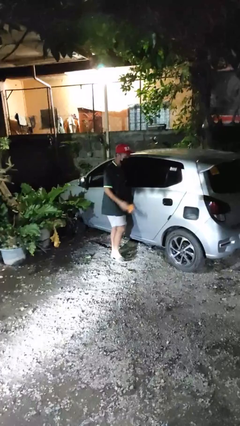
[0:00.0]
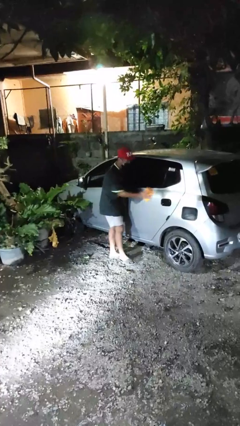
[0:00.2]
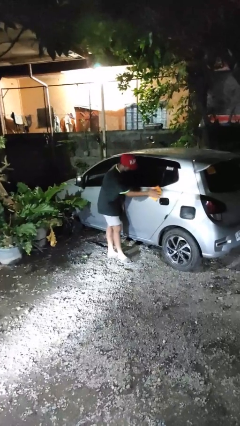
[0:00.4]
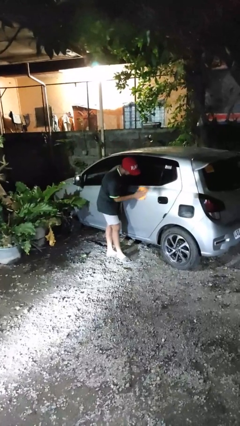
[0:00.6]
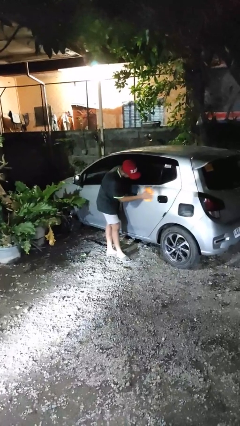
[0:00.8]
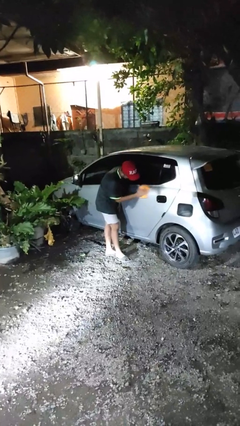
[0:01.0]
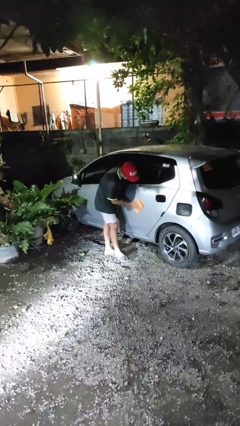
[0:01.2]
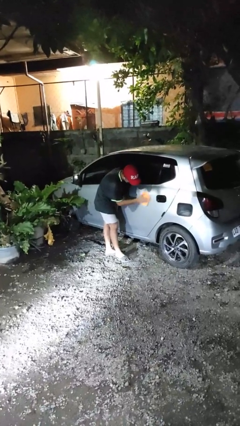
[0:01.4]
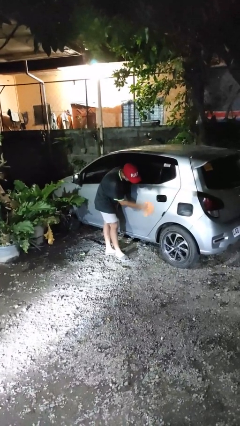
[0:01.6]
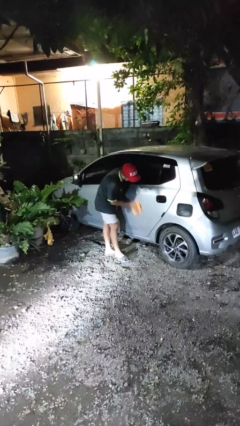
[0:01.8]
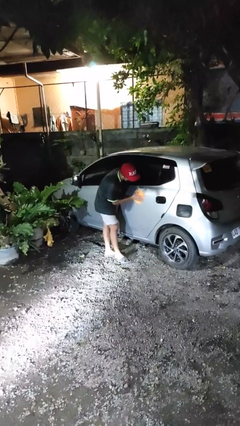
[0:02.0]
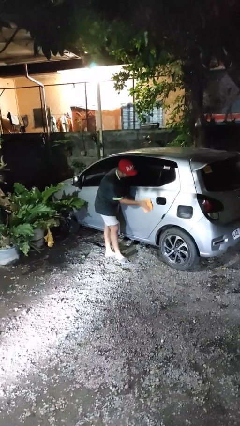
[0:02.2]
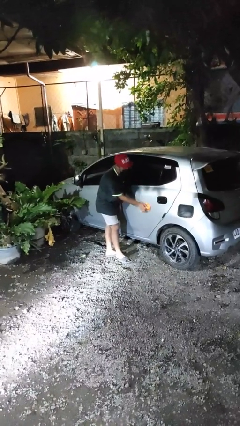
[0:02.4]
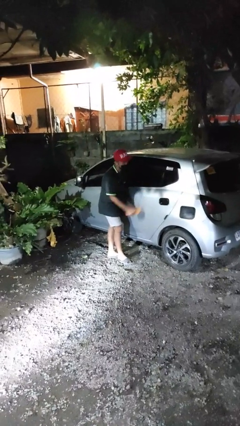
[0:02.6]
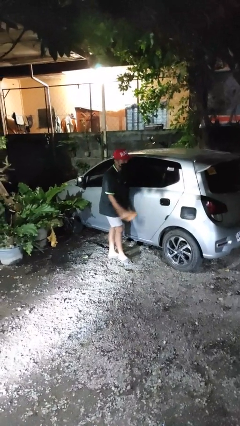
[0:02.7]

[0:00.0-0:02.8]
person polishes car with rag

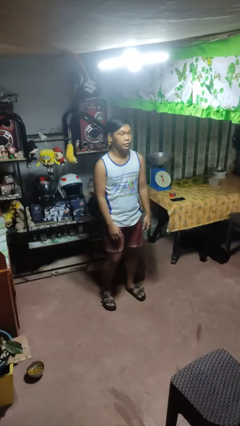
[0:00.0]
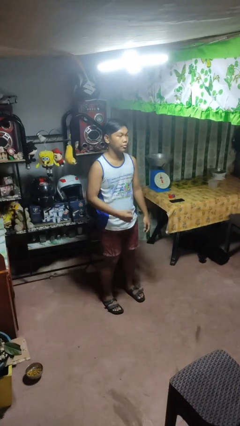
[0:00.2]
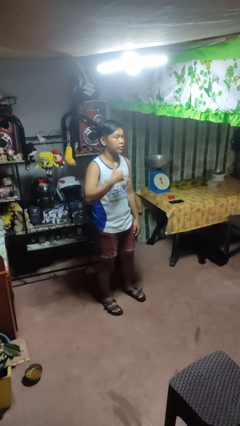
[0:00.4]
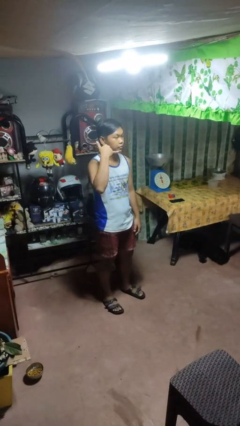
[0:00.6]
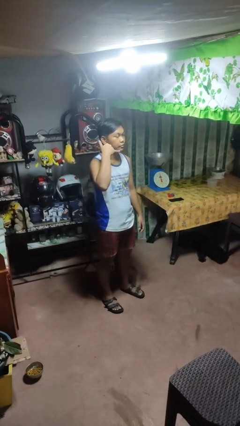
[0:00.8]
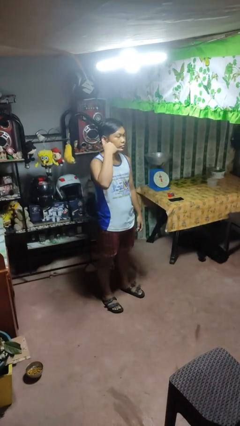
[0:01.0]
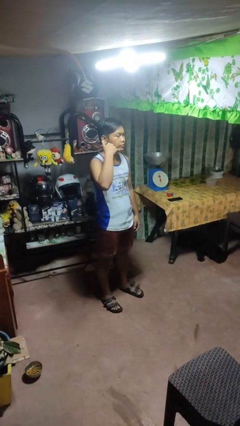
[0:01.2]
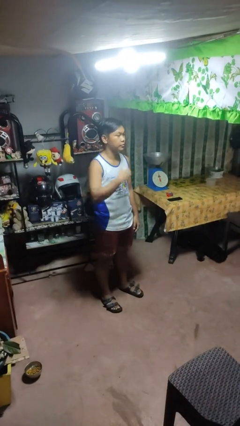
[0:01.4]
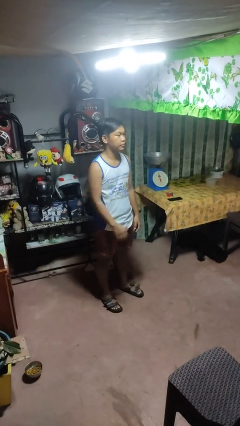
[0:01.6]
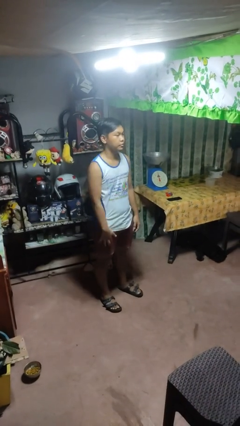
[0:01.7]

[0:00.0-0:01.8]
person gestures call me

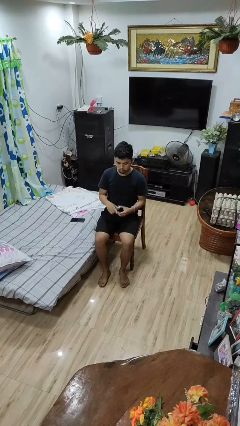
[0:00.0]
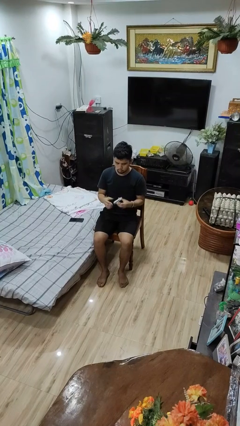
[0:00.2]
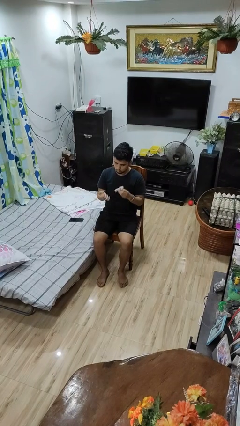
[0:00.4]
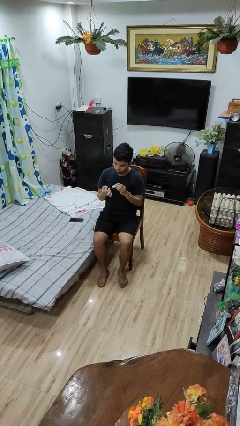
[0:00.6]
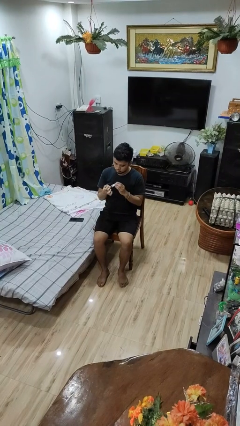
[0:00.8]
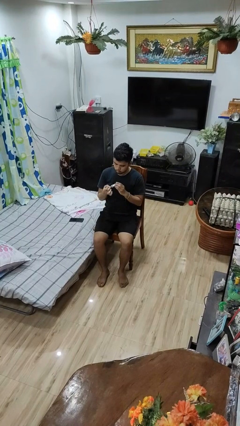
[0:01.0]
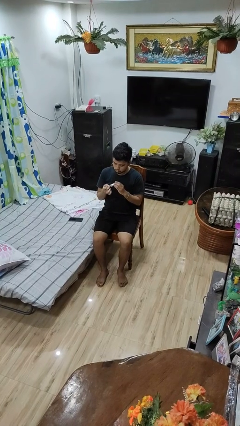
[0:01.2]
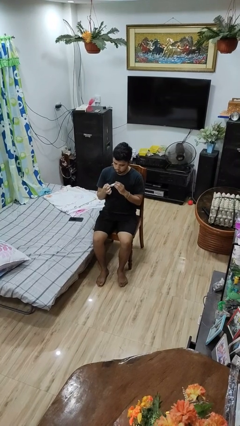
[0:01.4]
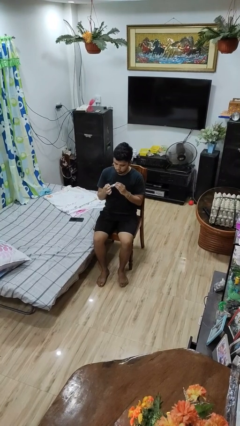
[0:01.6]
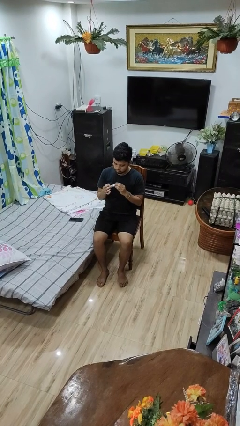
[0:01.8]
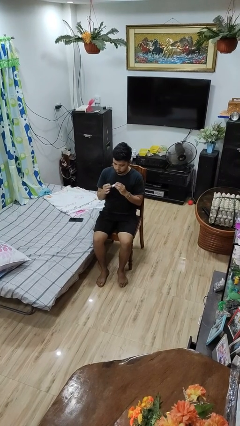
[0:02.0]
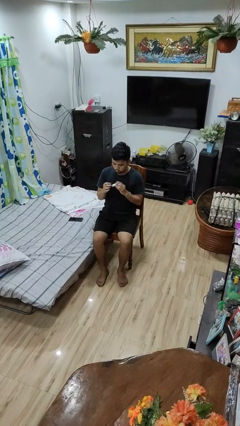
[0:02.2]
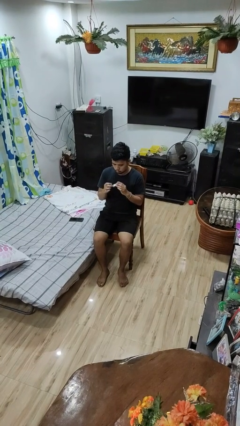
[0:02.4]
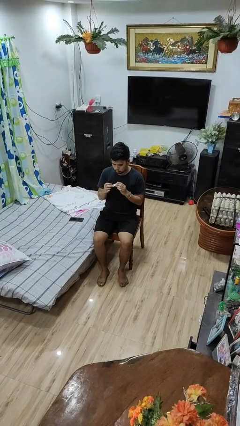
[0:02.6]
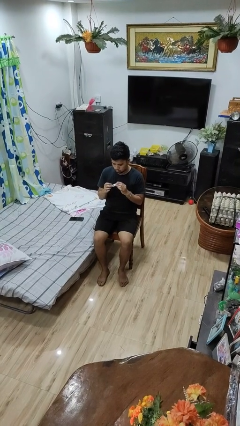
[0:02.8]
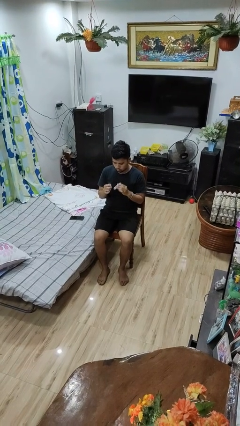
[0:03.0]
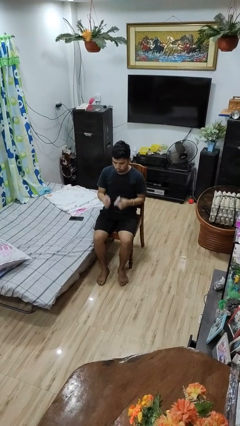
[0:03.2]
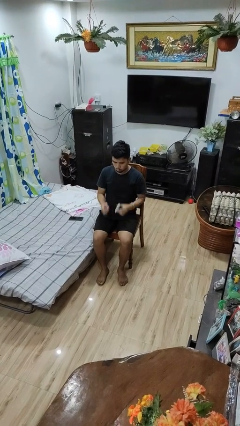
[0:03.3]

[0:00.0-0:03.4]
person clips fingernails

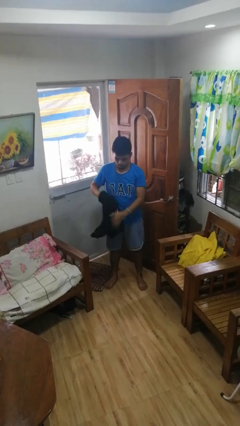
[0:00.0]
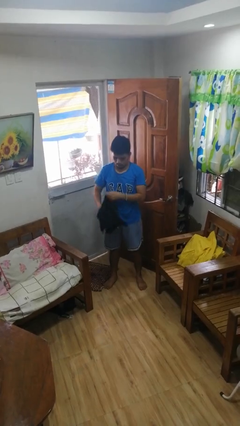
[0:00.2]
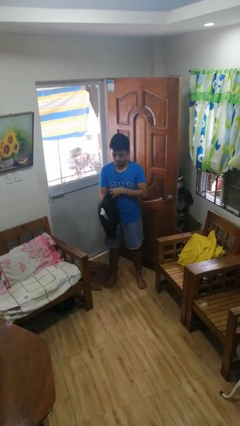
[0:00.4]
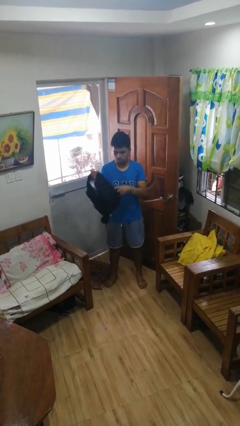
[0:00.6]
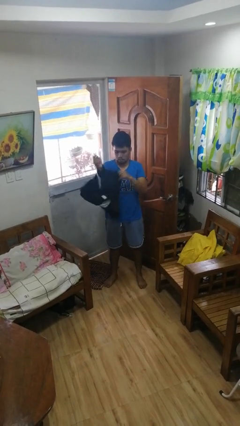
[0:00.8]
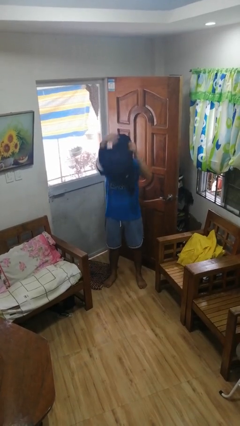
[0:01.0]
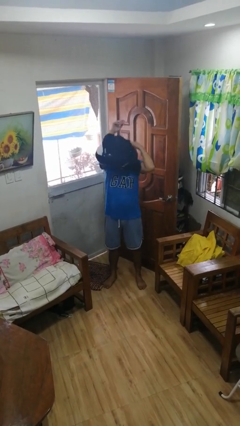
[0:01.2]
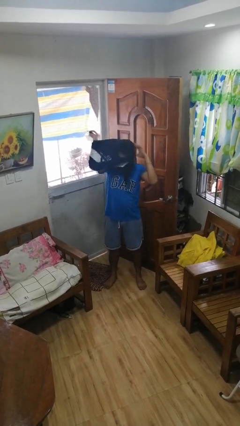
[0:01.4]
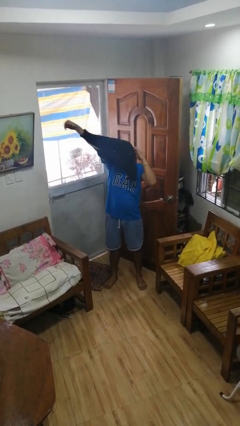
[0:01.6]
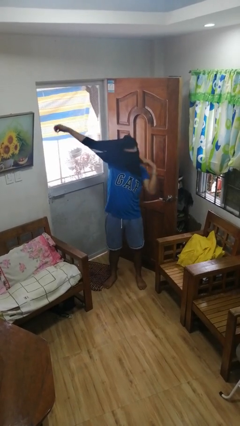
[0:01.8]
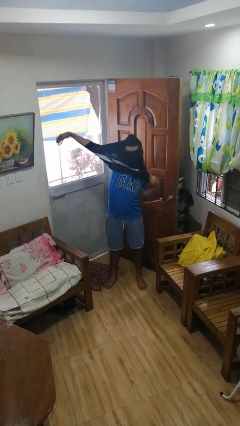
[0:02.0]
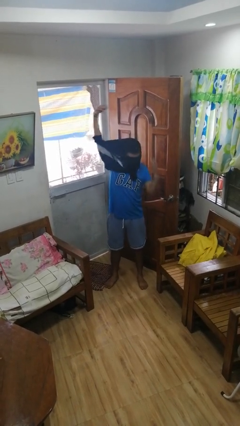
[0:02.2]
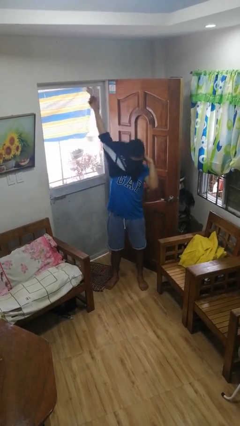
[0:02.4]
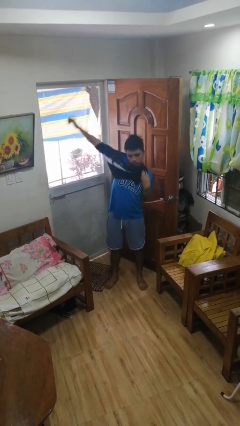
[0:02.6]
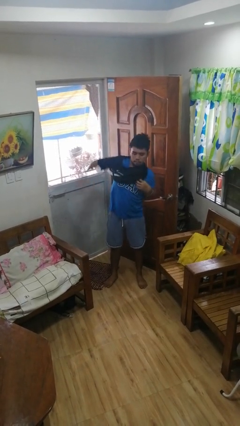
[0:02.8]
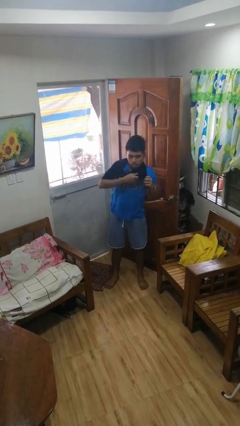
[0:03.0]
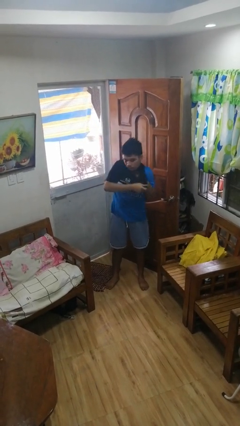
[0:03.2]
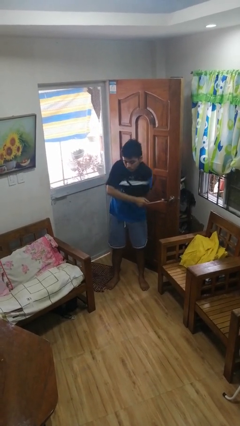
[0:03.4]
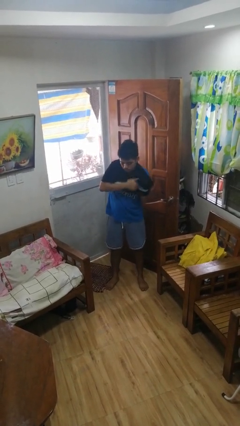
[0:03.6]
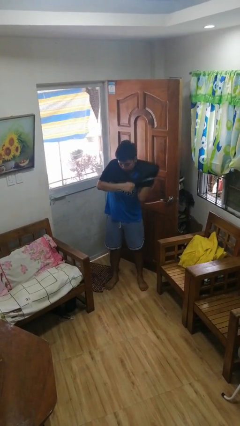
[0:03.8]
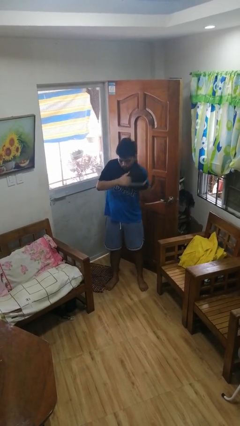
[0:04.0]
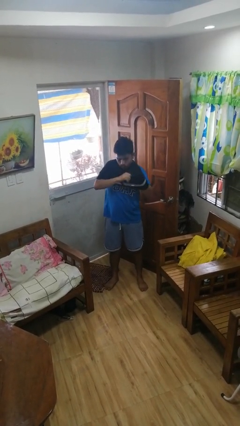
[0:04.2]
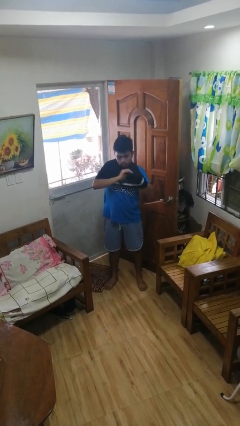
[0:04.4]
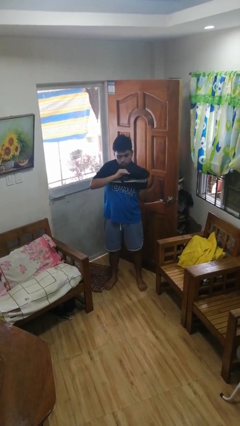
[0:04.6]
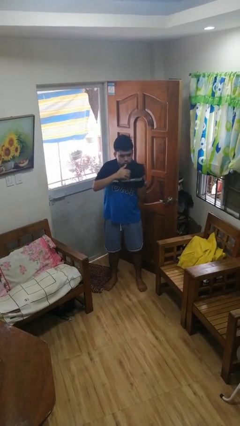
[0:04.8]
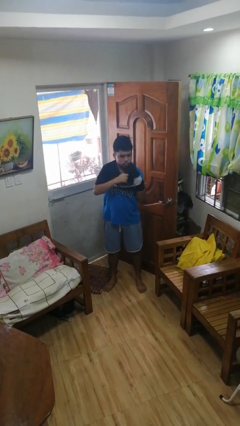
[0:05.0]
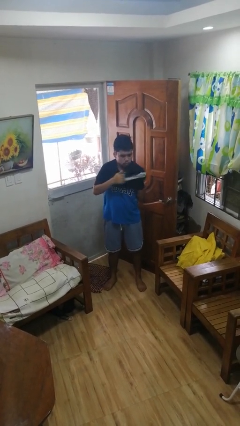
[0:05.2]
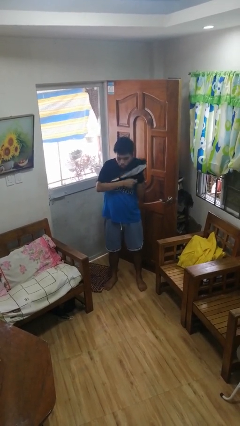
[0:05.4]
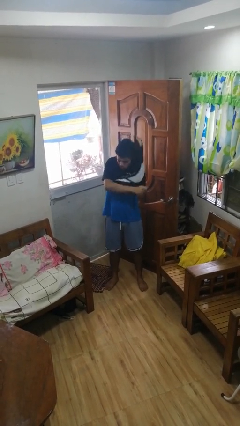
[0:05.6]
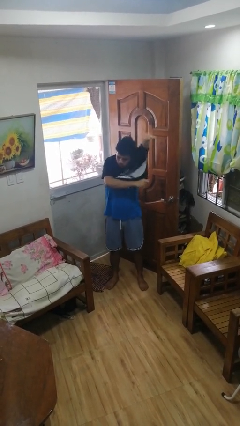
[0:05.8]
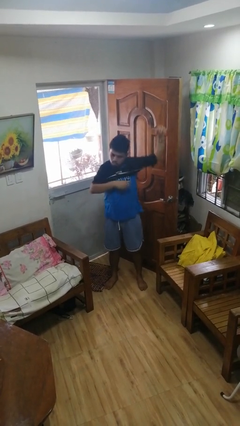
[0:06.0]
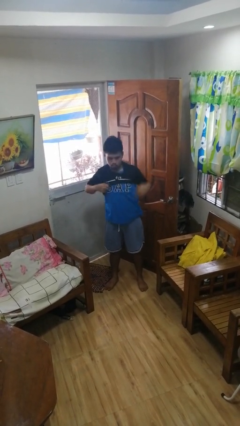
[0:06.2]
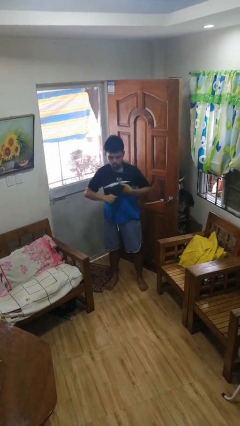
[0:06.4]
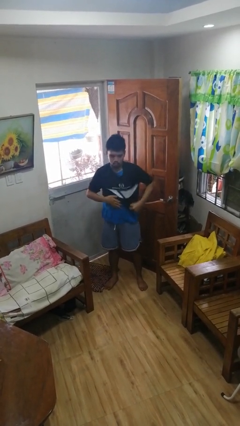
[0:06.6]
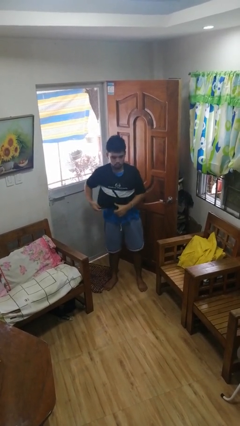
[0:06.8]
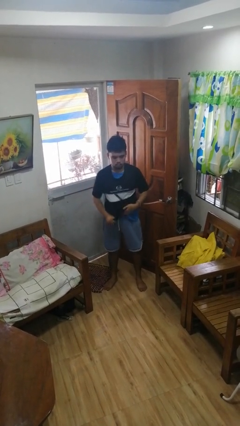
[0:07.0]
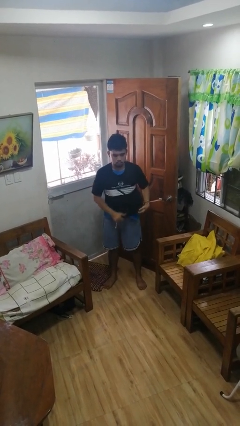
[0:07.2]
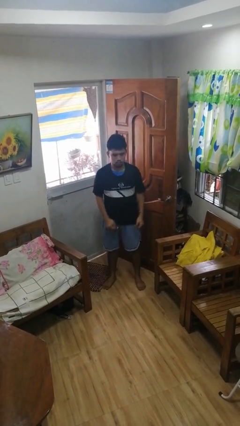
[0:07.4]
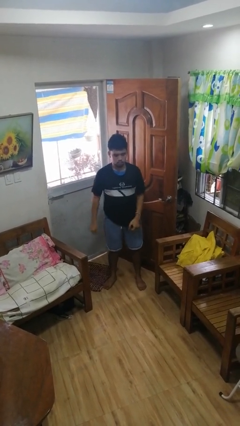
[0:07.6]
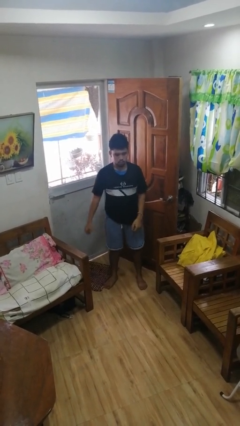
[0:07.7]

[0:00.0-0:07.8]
person puts on shirt

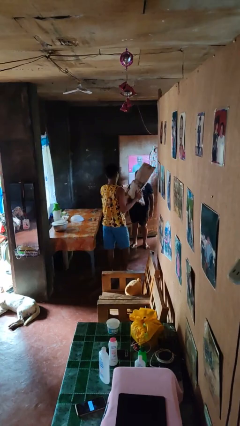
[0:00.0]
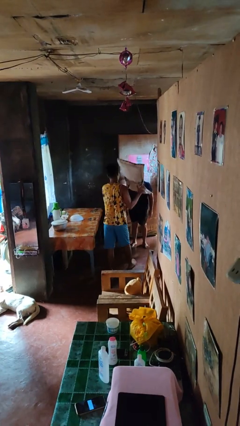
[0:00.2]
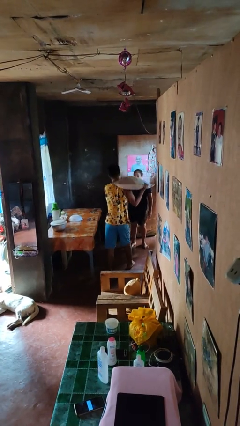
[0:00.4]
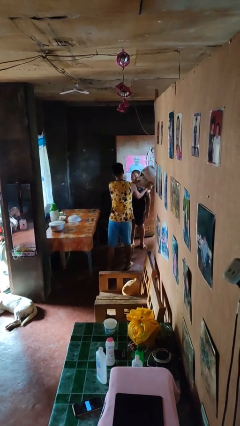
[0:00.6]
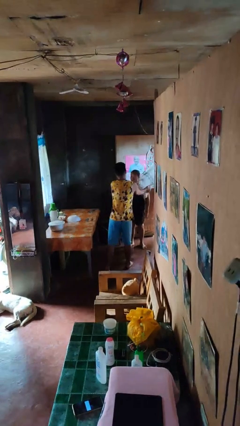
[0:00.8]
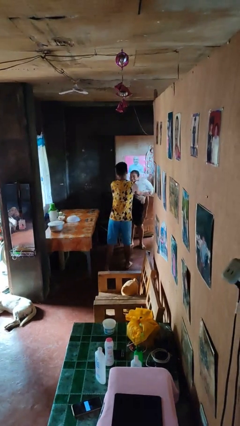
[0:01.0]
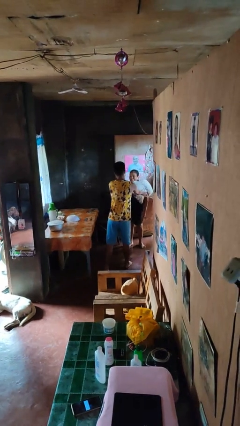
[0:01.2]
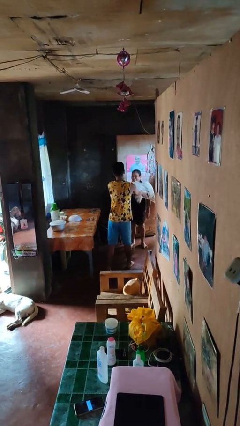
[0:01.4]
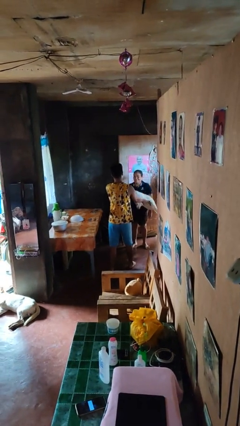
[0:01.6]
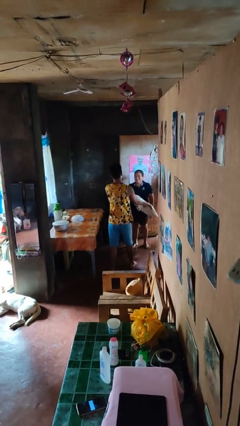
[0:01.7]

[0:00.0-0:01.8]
person hits person with pillow
